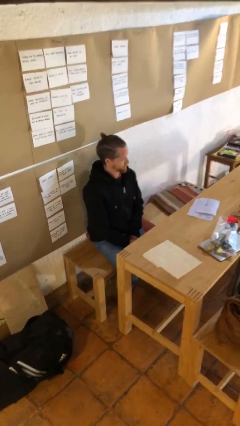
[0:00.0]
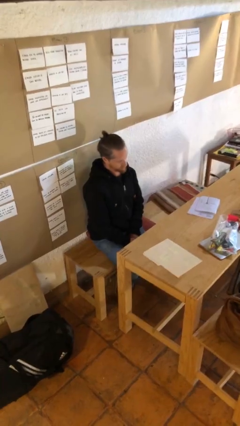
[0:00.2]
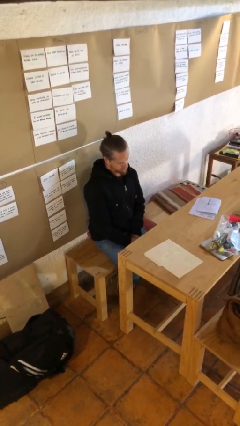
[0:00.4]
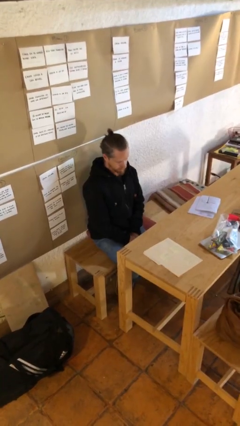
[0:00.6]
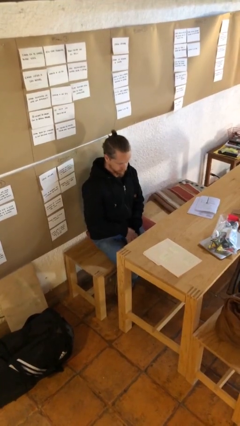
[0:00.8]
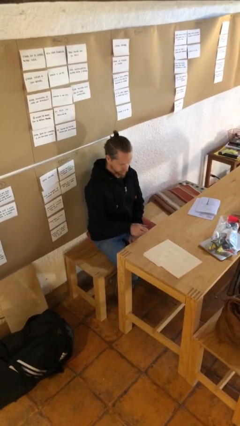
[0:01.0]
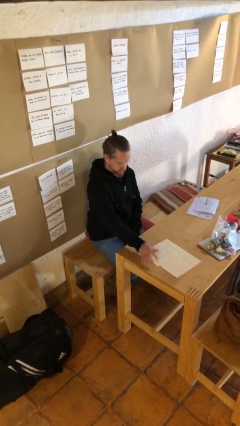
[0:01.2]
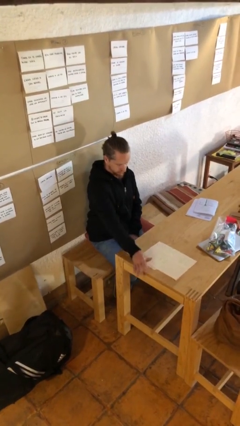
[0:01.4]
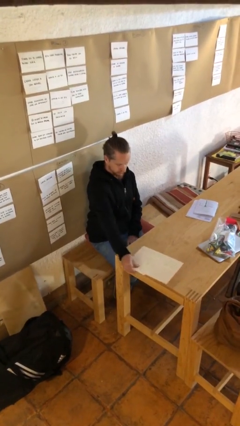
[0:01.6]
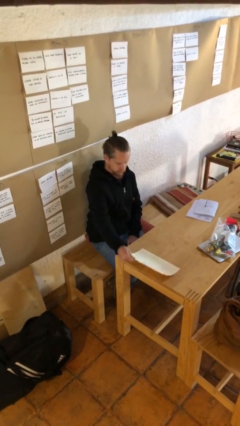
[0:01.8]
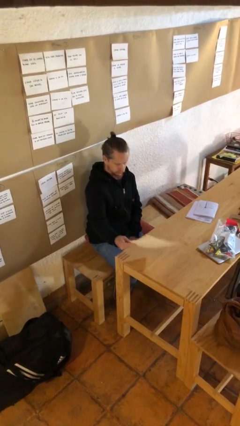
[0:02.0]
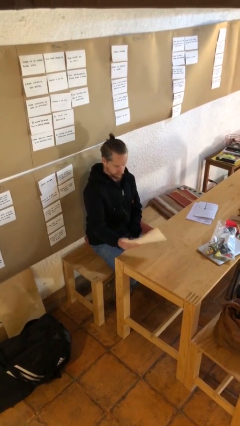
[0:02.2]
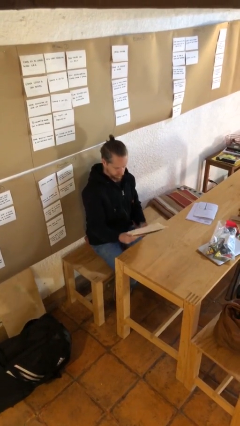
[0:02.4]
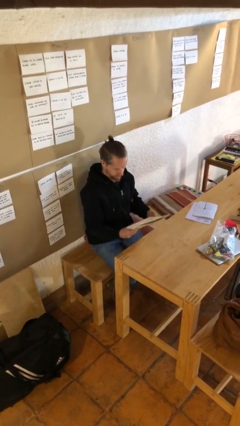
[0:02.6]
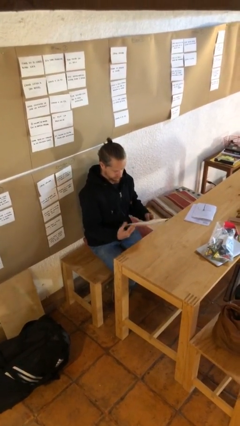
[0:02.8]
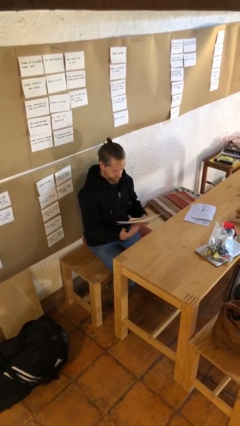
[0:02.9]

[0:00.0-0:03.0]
person picks up object from table

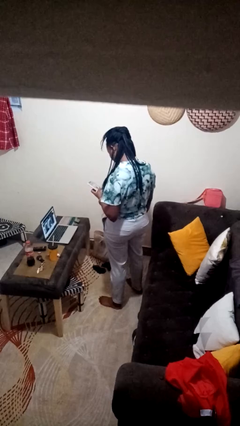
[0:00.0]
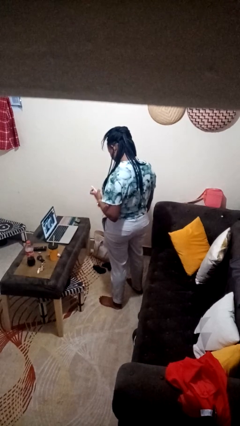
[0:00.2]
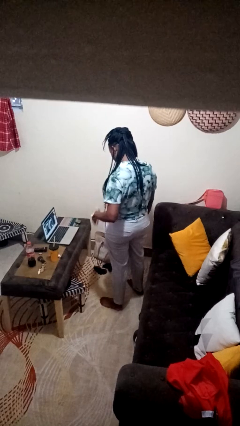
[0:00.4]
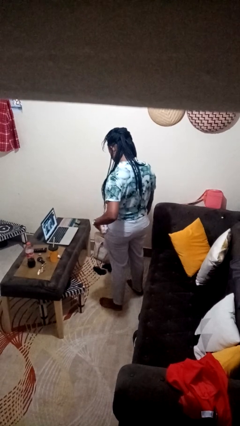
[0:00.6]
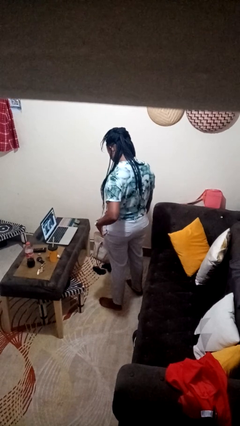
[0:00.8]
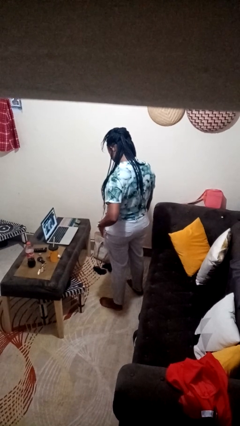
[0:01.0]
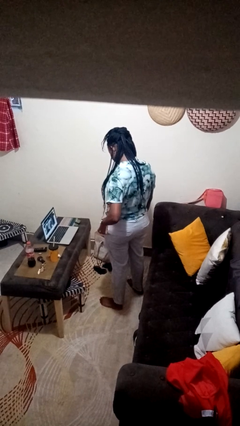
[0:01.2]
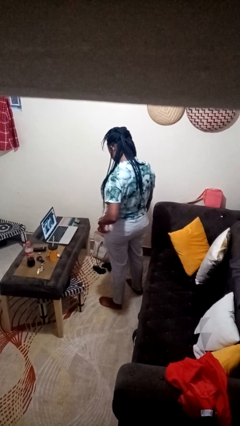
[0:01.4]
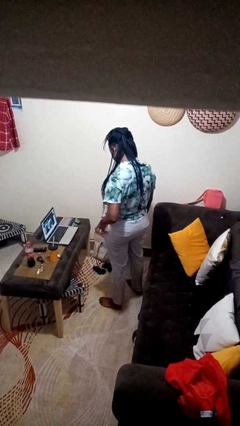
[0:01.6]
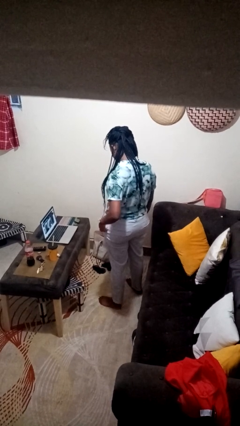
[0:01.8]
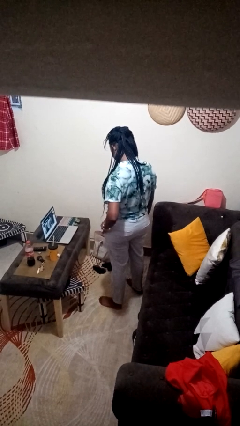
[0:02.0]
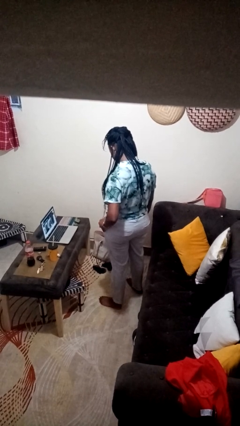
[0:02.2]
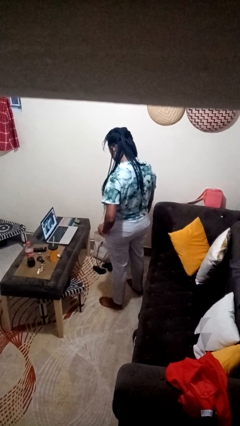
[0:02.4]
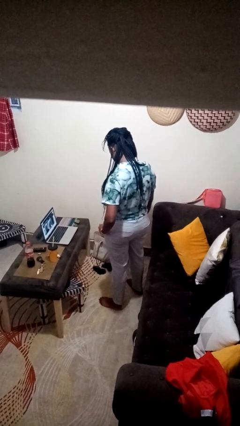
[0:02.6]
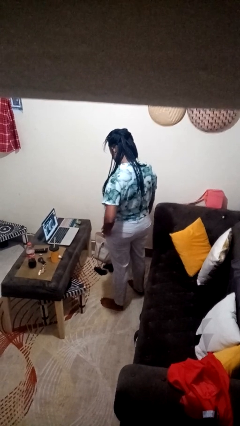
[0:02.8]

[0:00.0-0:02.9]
person puts phone into pocket

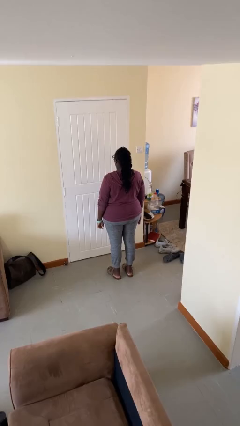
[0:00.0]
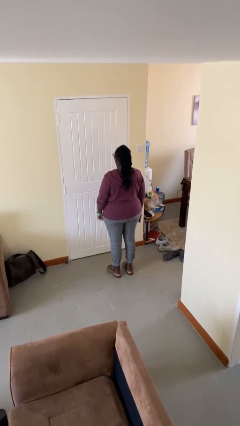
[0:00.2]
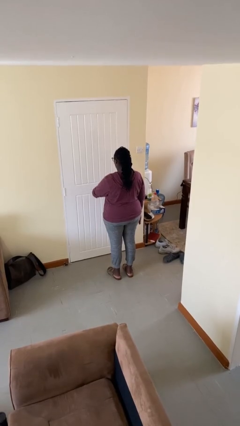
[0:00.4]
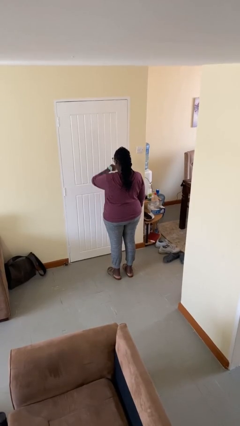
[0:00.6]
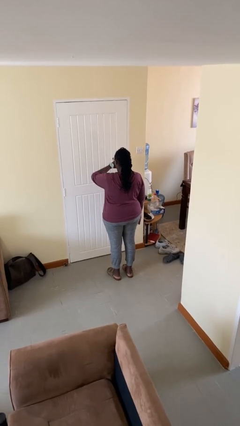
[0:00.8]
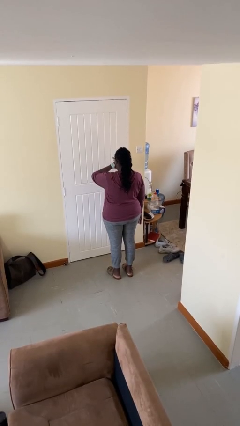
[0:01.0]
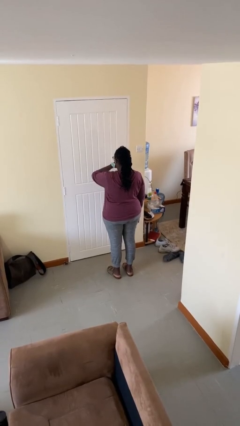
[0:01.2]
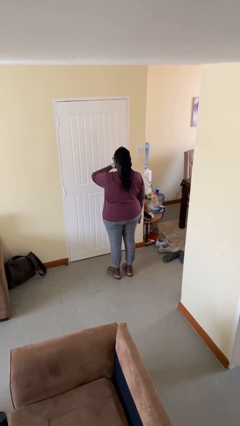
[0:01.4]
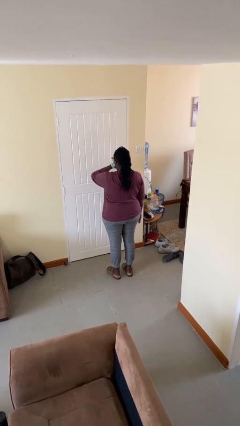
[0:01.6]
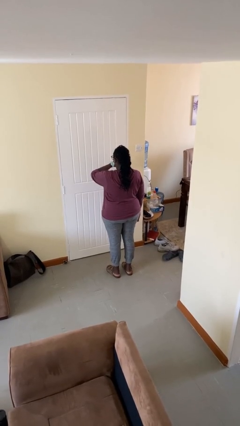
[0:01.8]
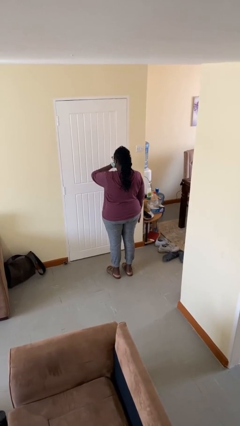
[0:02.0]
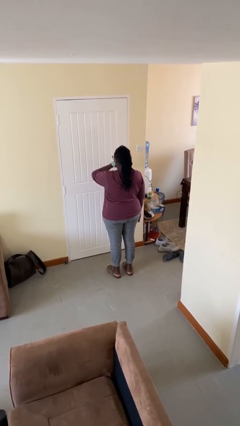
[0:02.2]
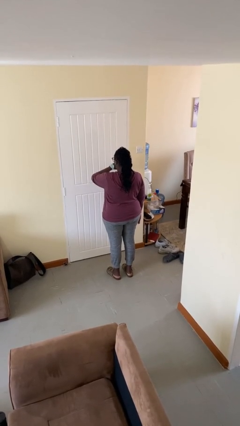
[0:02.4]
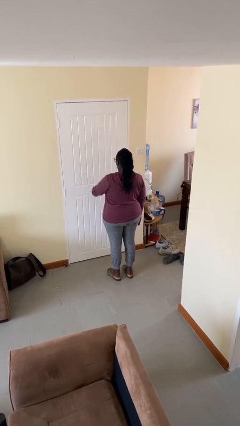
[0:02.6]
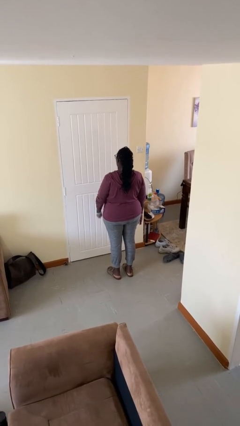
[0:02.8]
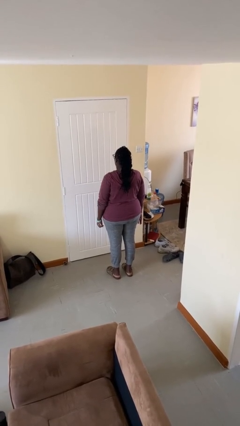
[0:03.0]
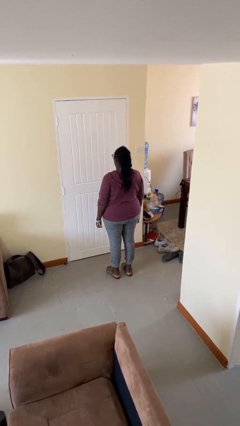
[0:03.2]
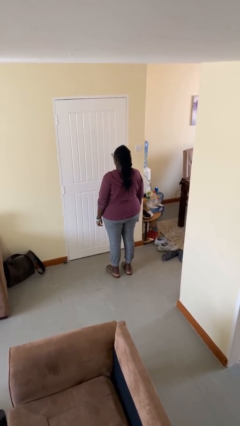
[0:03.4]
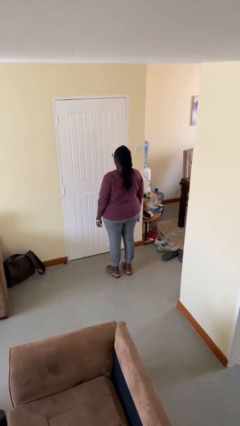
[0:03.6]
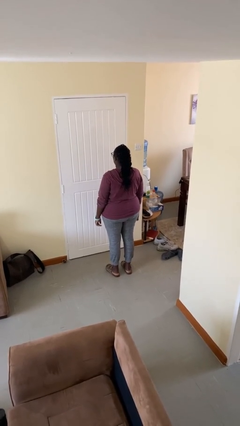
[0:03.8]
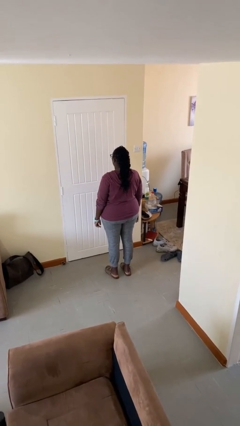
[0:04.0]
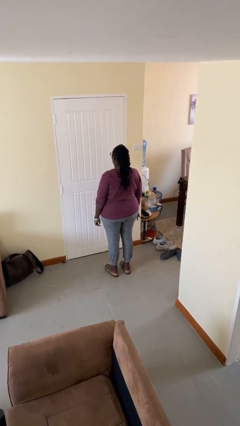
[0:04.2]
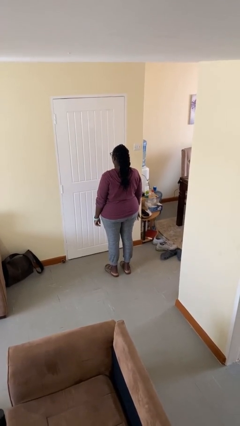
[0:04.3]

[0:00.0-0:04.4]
person looks at wristwatch

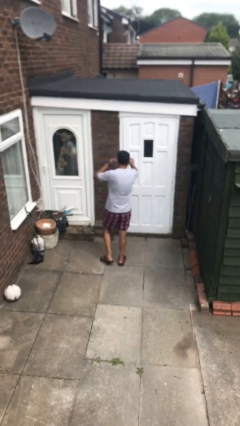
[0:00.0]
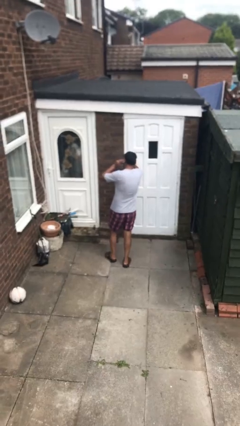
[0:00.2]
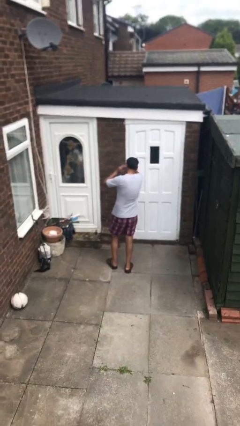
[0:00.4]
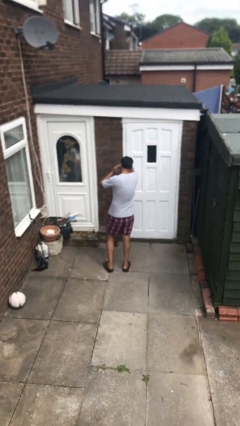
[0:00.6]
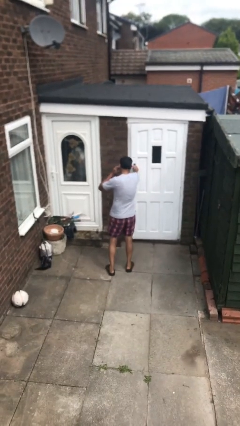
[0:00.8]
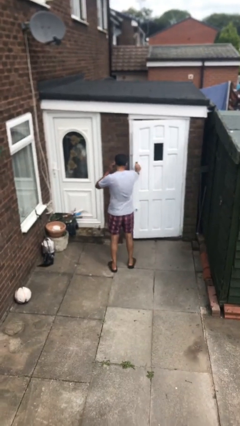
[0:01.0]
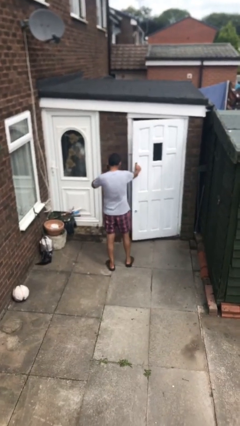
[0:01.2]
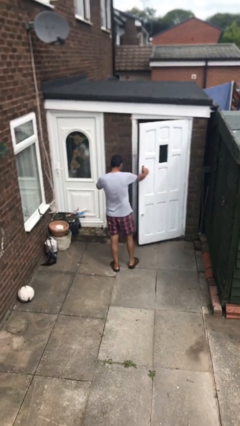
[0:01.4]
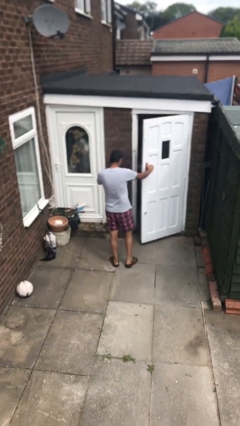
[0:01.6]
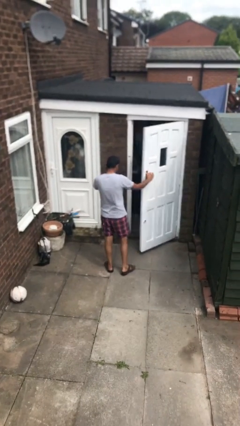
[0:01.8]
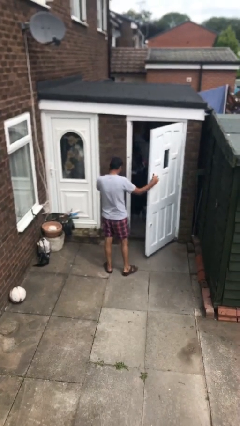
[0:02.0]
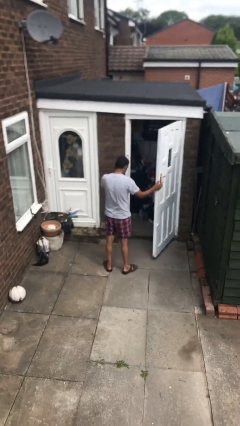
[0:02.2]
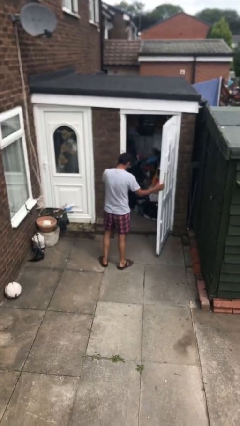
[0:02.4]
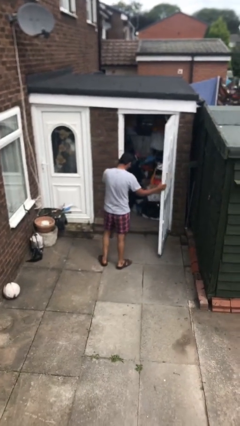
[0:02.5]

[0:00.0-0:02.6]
person opens facility door

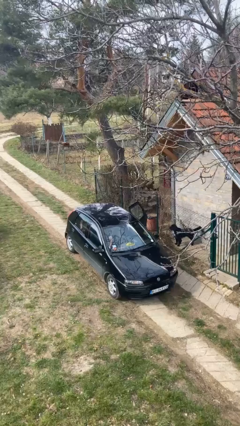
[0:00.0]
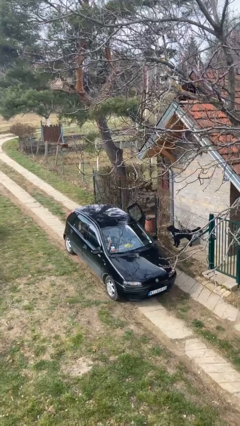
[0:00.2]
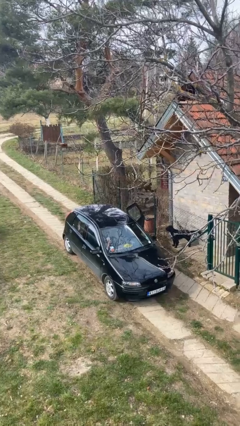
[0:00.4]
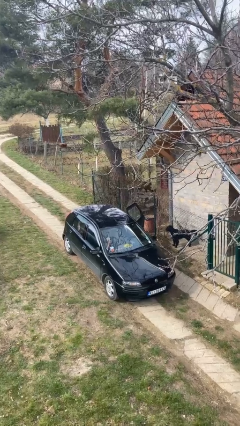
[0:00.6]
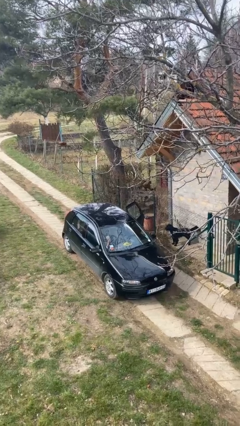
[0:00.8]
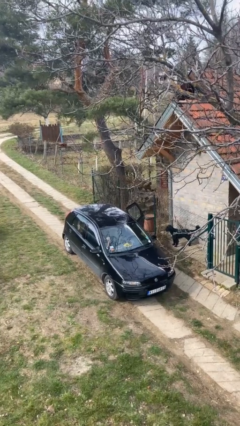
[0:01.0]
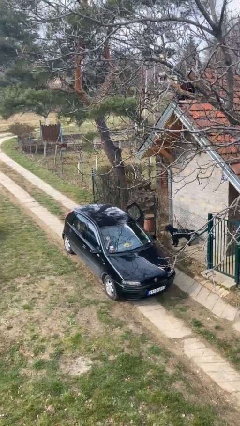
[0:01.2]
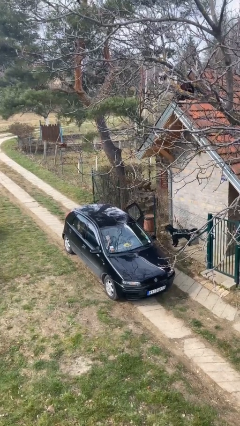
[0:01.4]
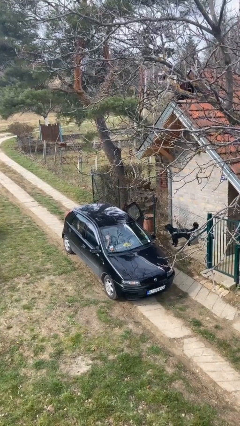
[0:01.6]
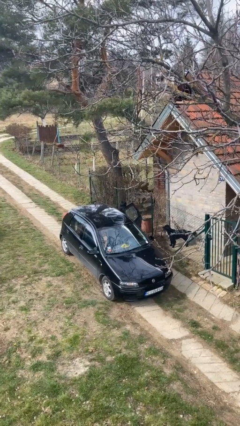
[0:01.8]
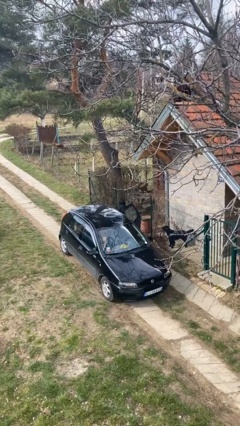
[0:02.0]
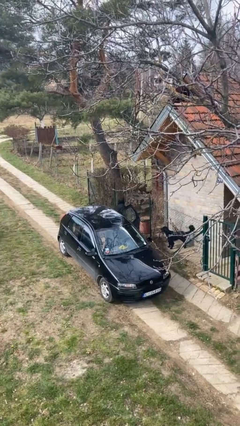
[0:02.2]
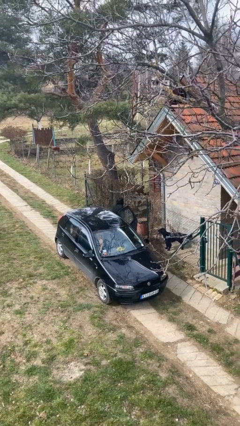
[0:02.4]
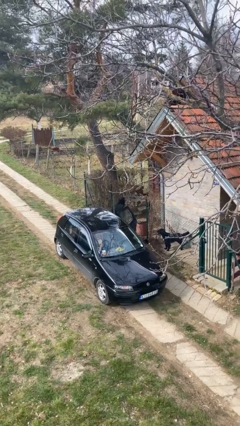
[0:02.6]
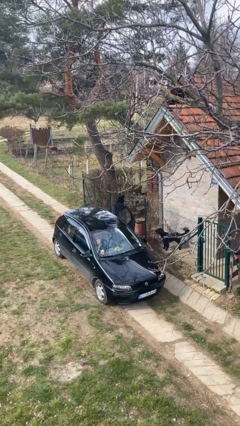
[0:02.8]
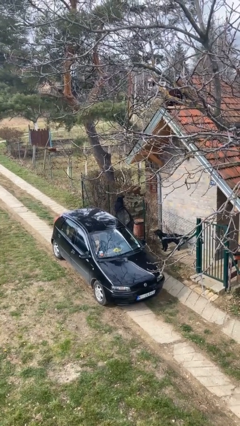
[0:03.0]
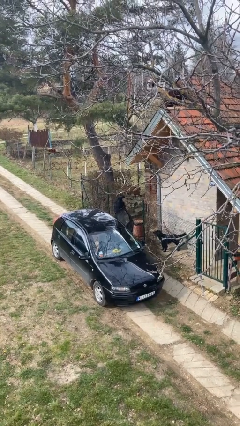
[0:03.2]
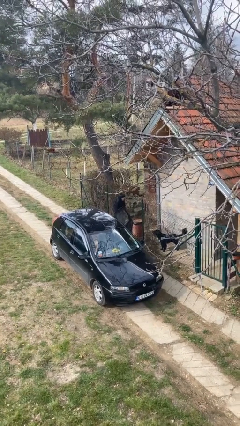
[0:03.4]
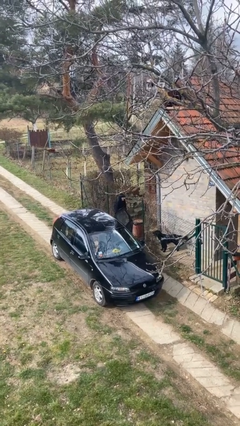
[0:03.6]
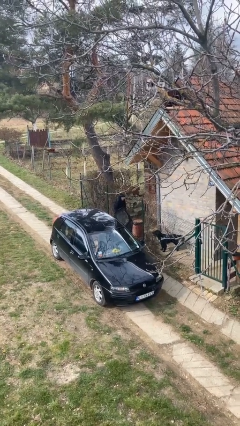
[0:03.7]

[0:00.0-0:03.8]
person exits car

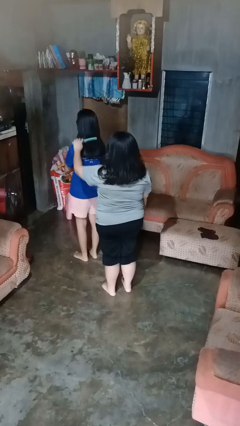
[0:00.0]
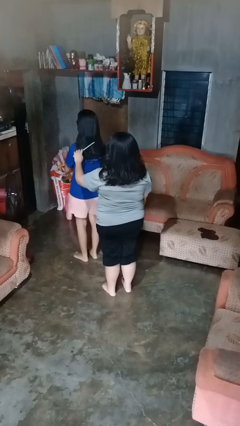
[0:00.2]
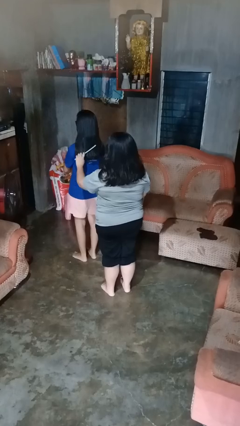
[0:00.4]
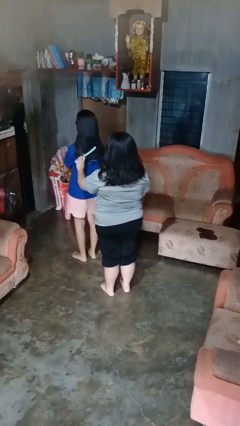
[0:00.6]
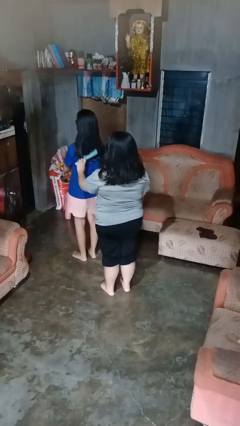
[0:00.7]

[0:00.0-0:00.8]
person brushes hair of person
